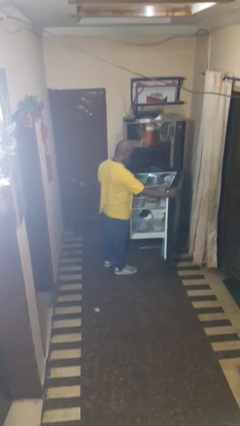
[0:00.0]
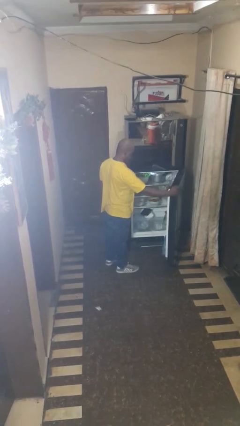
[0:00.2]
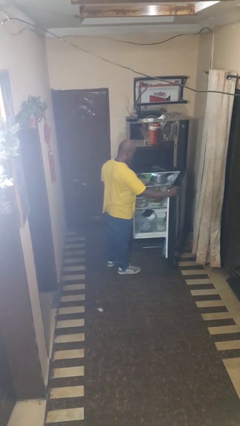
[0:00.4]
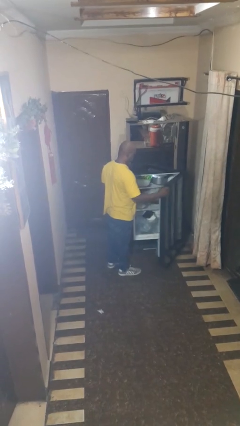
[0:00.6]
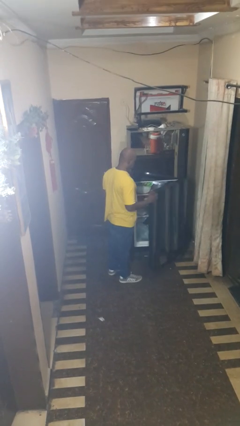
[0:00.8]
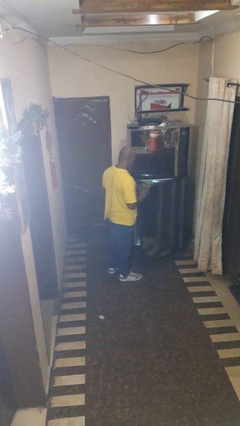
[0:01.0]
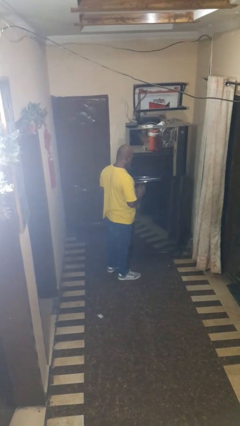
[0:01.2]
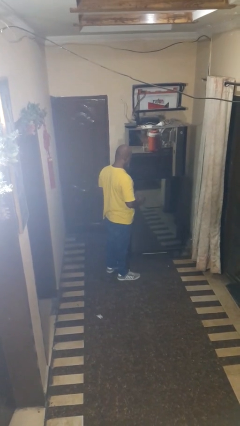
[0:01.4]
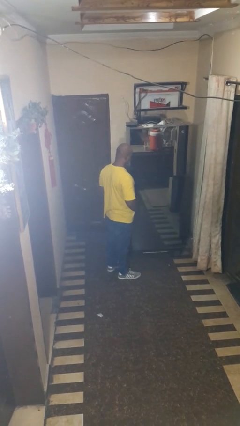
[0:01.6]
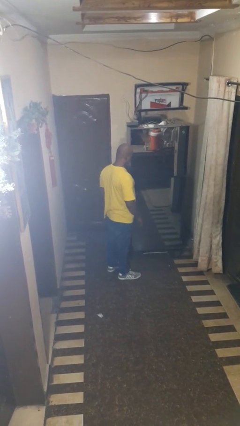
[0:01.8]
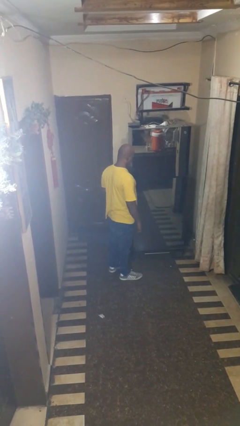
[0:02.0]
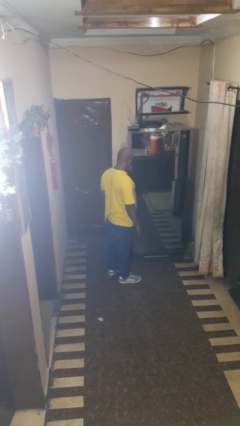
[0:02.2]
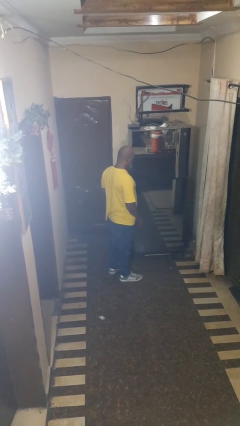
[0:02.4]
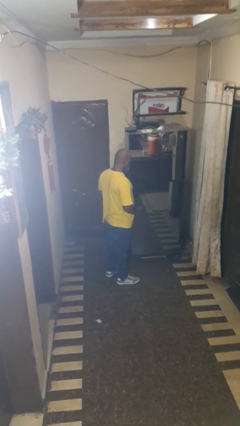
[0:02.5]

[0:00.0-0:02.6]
person closes refrigerator

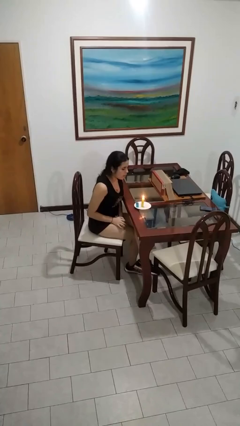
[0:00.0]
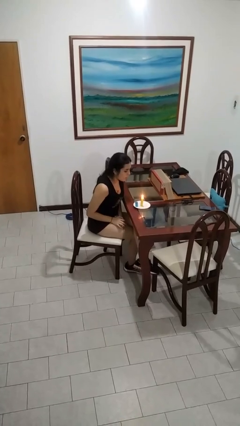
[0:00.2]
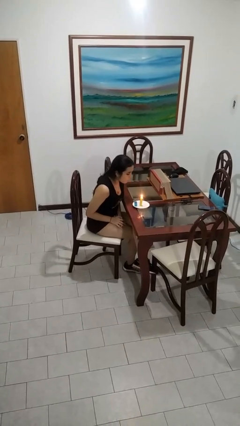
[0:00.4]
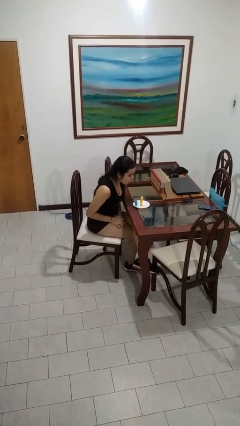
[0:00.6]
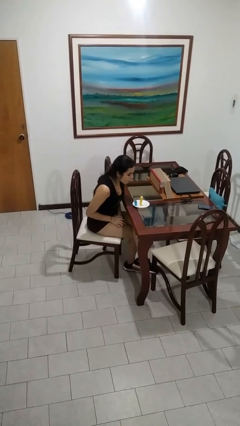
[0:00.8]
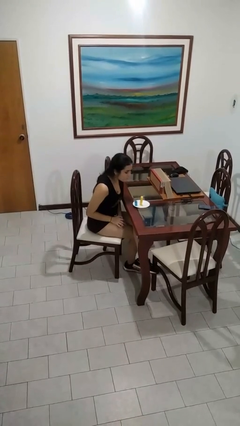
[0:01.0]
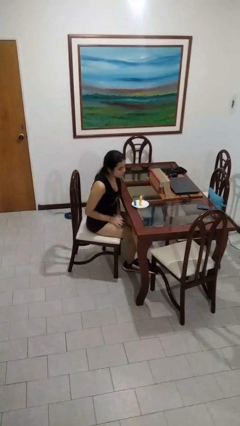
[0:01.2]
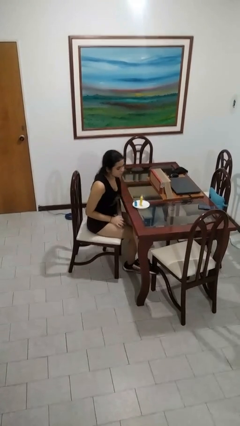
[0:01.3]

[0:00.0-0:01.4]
person extinguishes candle

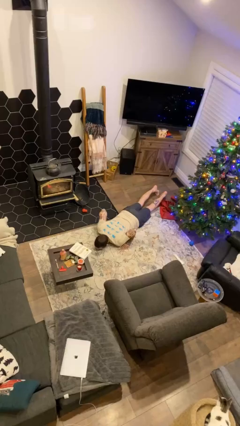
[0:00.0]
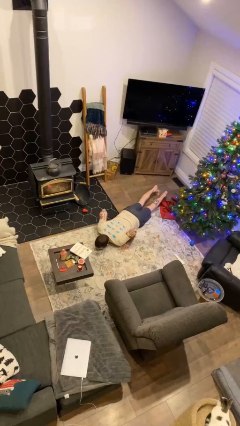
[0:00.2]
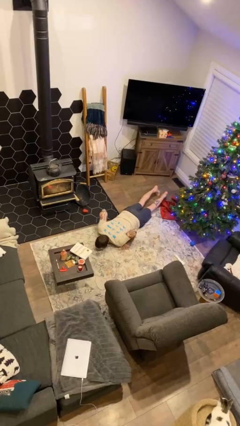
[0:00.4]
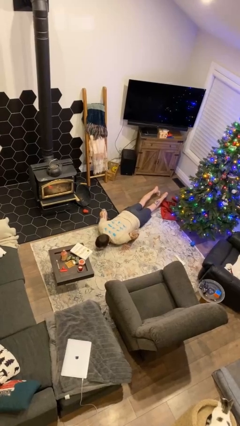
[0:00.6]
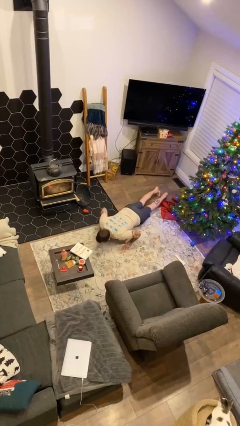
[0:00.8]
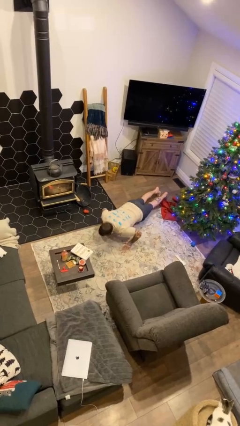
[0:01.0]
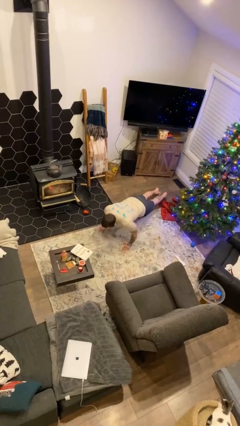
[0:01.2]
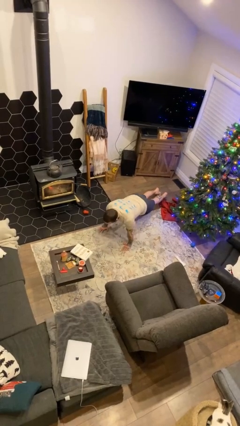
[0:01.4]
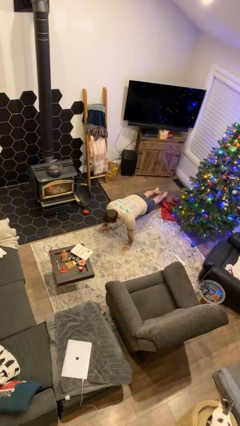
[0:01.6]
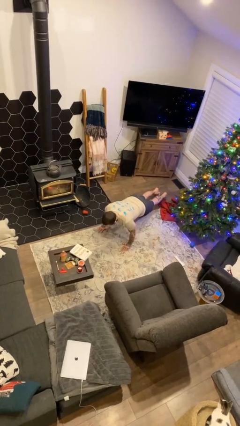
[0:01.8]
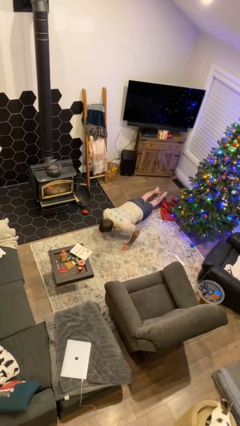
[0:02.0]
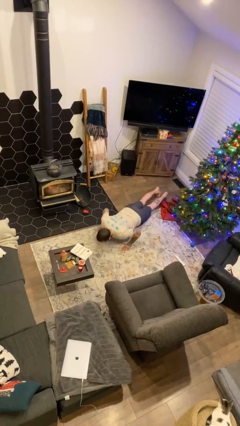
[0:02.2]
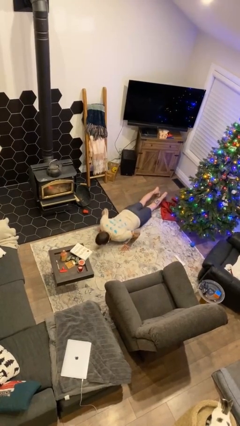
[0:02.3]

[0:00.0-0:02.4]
person exercises with pushup

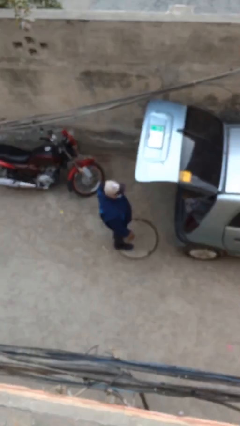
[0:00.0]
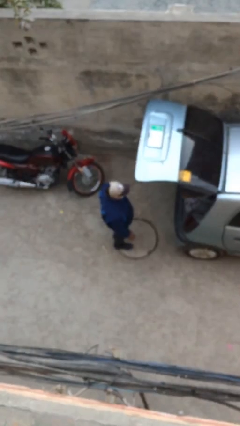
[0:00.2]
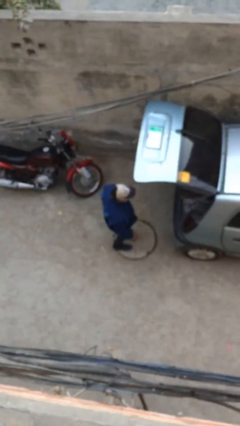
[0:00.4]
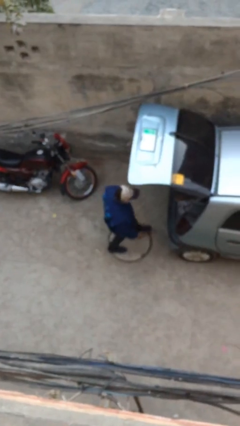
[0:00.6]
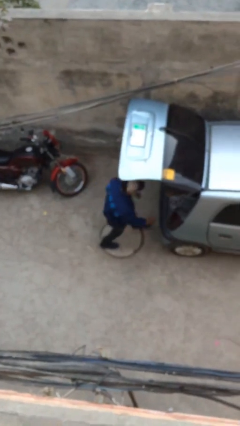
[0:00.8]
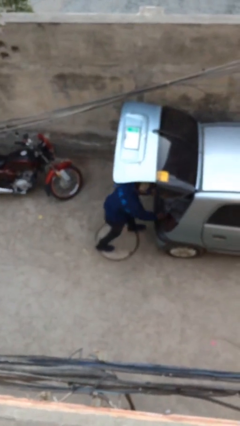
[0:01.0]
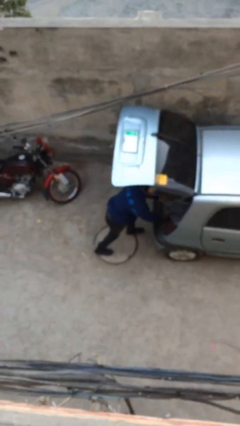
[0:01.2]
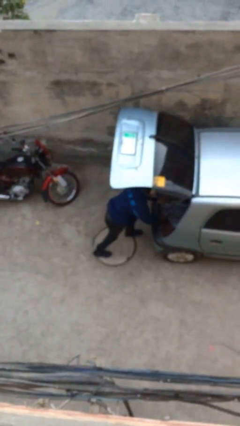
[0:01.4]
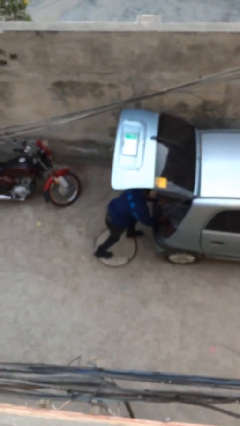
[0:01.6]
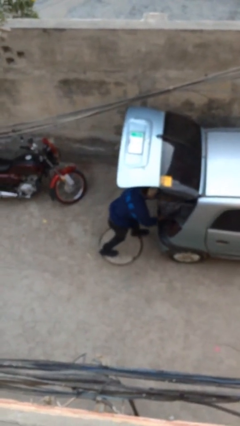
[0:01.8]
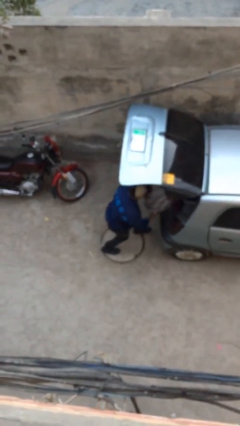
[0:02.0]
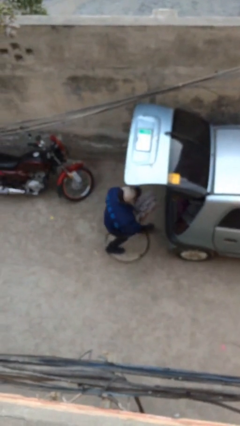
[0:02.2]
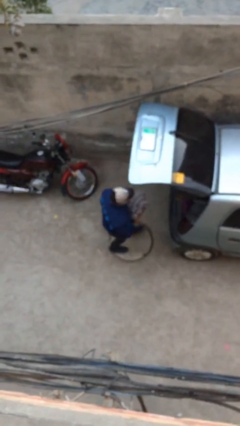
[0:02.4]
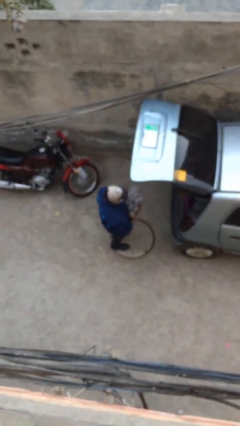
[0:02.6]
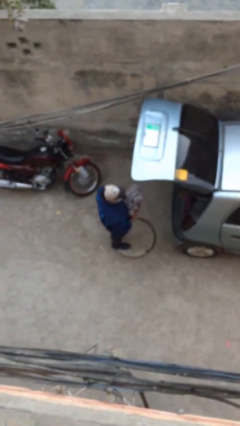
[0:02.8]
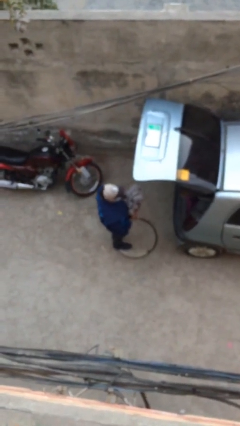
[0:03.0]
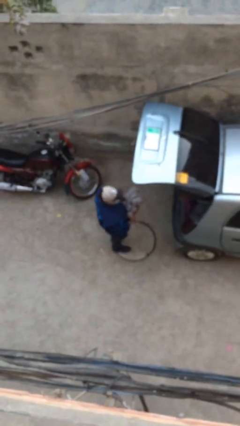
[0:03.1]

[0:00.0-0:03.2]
person unloads car

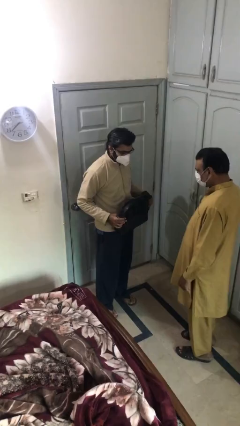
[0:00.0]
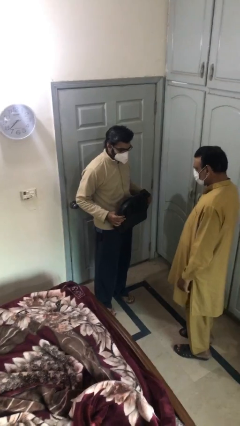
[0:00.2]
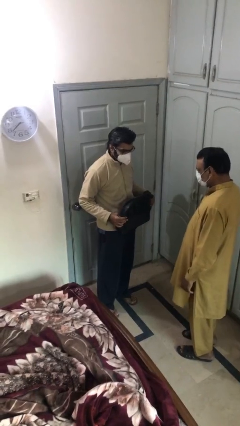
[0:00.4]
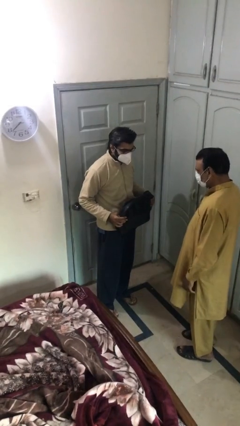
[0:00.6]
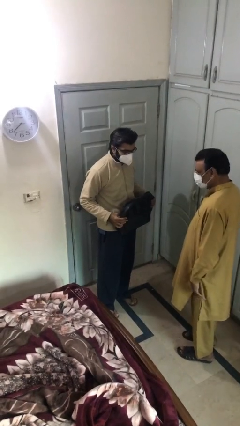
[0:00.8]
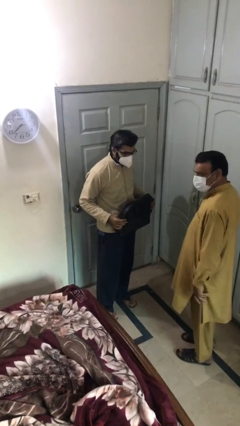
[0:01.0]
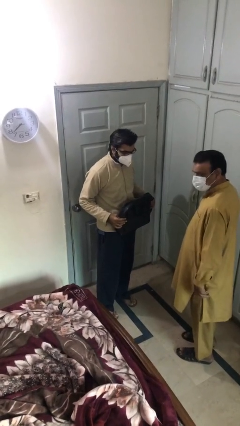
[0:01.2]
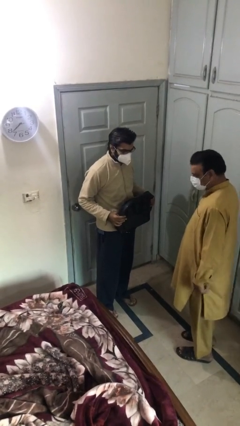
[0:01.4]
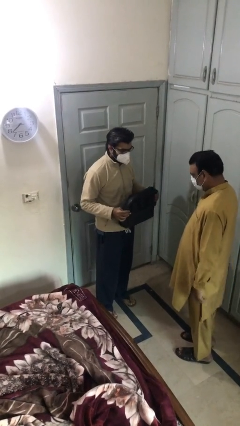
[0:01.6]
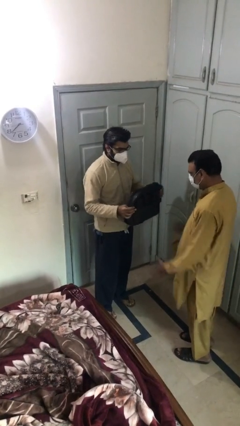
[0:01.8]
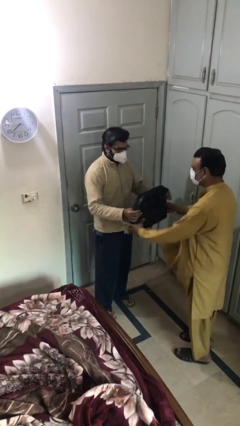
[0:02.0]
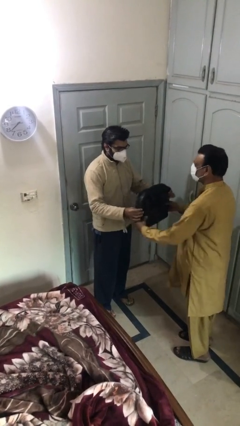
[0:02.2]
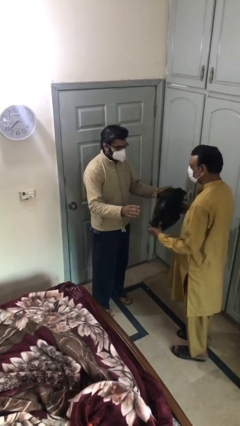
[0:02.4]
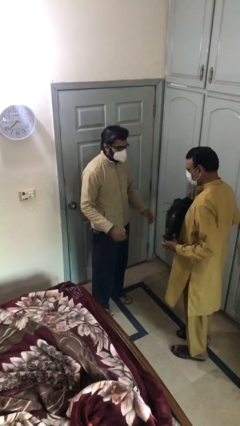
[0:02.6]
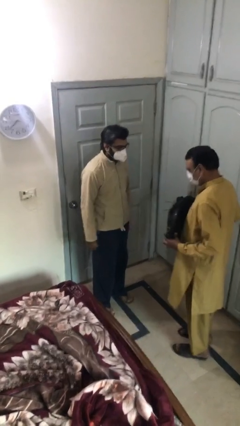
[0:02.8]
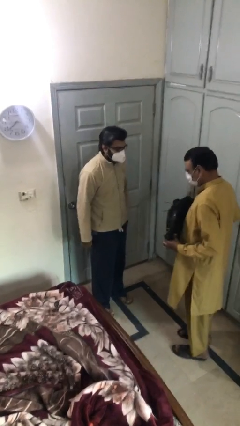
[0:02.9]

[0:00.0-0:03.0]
person transfers object to person

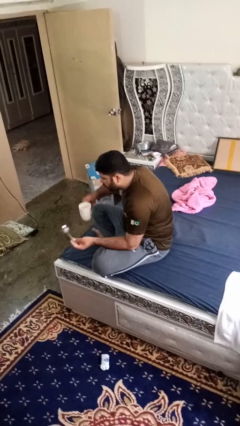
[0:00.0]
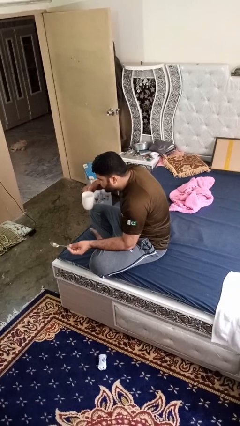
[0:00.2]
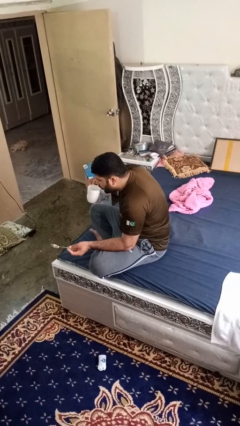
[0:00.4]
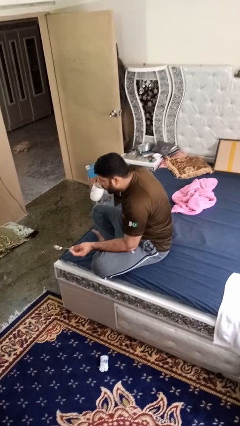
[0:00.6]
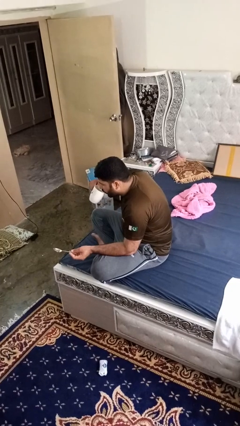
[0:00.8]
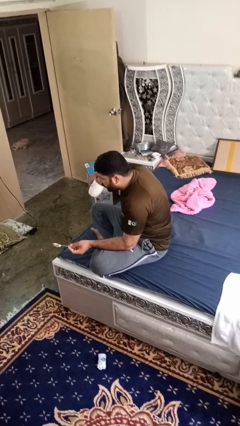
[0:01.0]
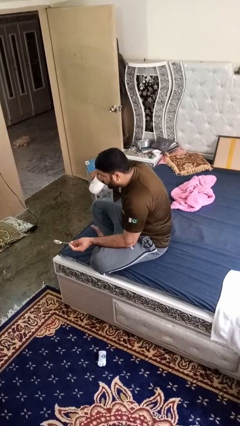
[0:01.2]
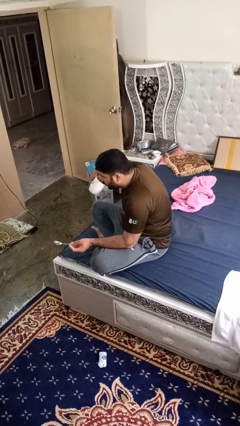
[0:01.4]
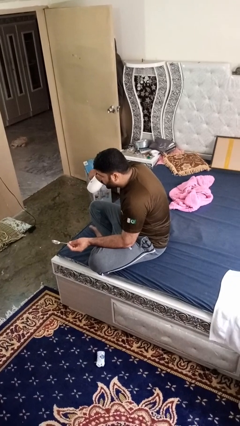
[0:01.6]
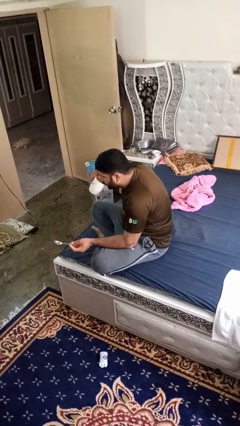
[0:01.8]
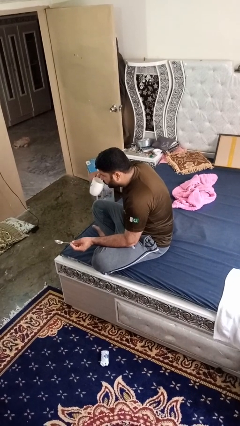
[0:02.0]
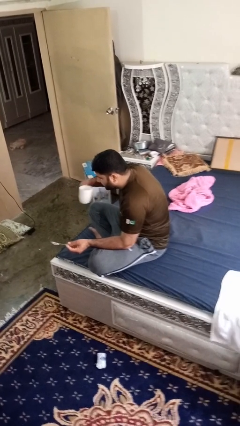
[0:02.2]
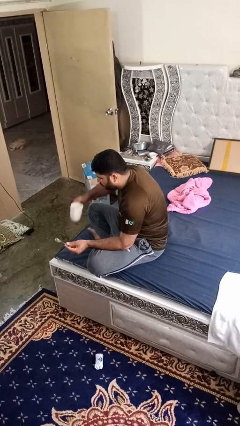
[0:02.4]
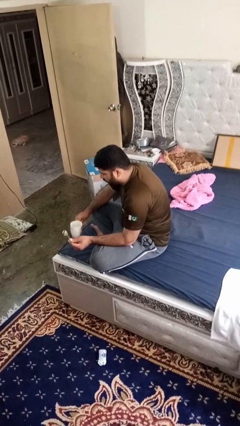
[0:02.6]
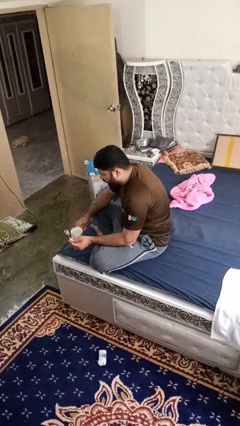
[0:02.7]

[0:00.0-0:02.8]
person drinks from mug

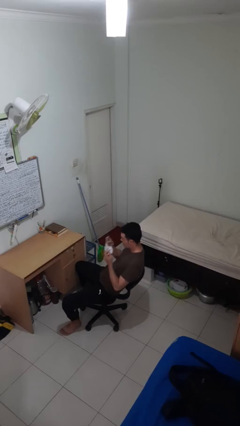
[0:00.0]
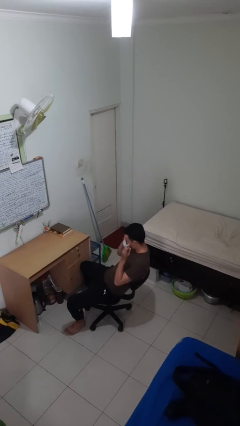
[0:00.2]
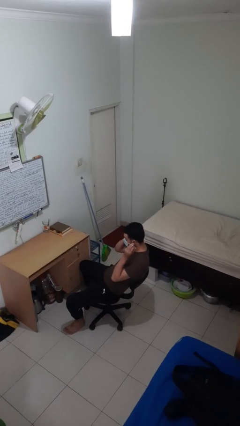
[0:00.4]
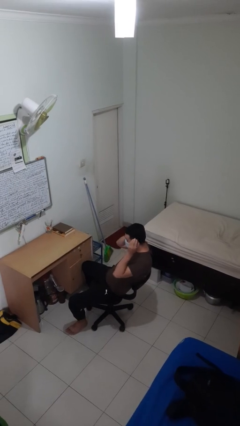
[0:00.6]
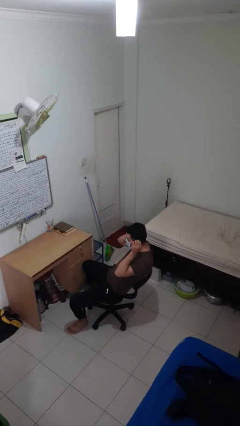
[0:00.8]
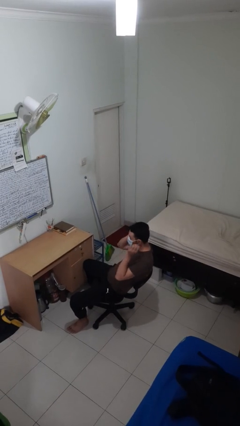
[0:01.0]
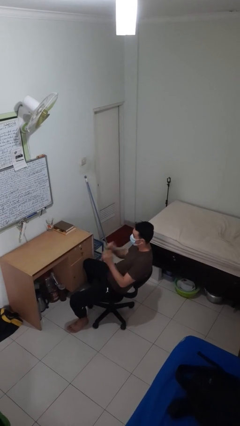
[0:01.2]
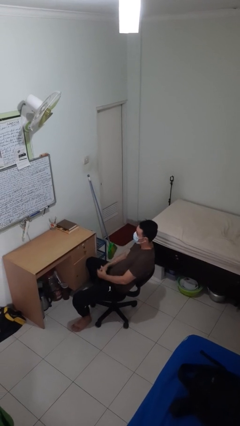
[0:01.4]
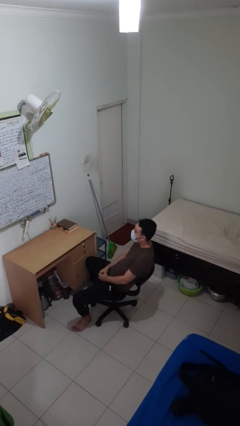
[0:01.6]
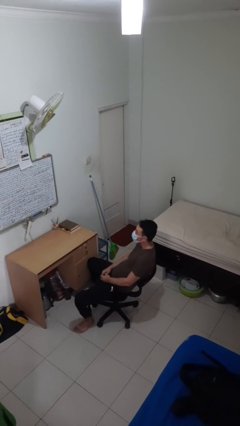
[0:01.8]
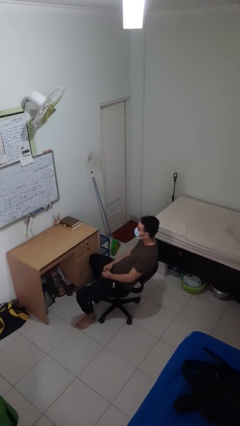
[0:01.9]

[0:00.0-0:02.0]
person puts on facemask
